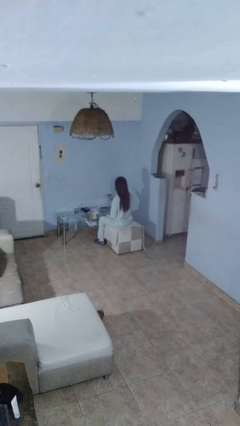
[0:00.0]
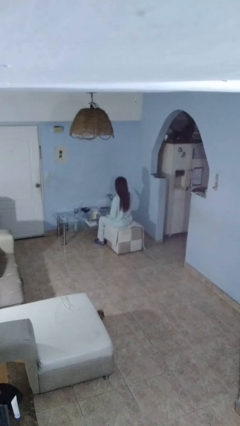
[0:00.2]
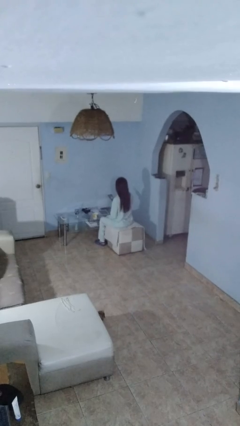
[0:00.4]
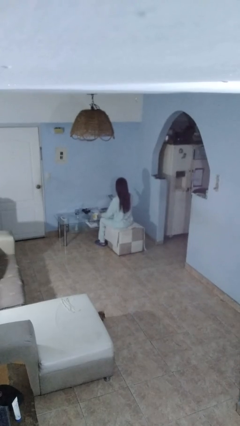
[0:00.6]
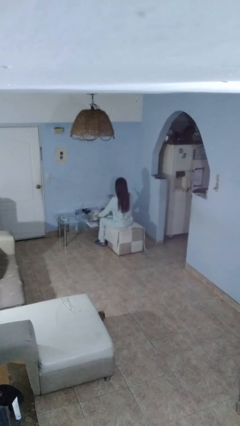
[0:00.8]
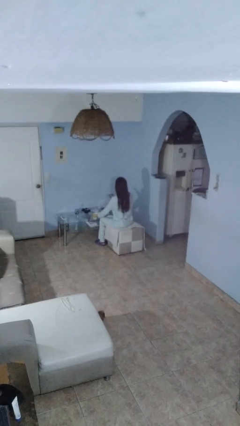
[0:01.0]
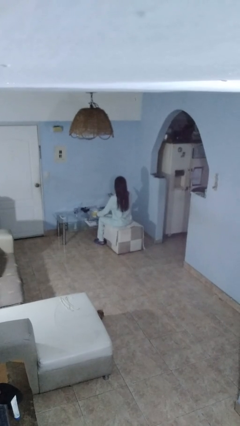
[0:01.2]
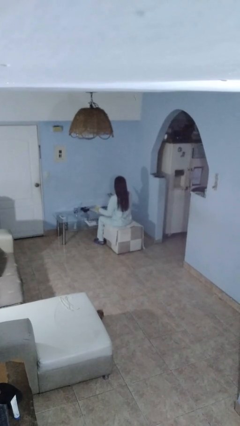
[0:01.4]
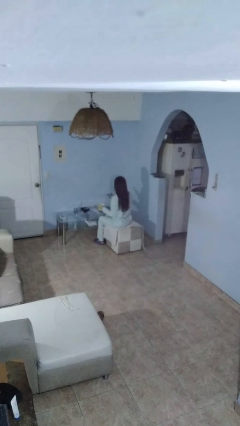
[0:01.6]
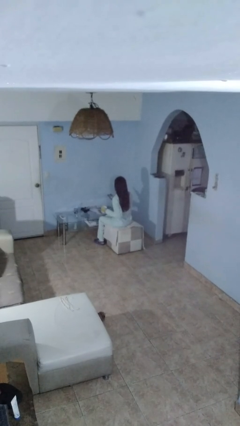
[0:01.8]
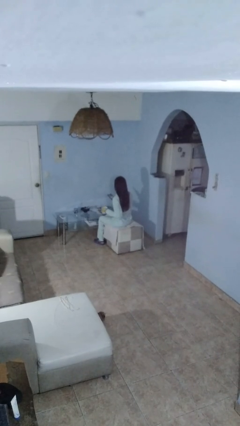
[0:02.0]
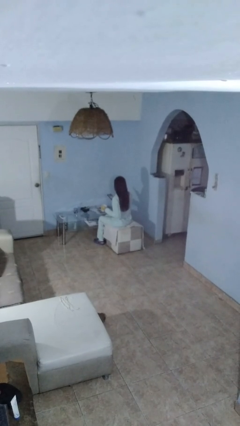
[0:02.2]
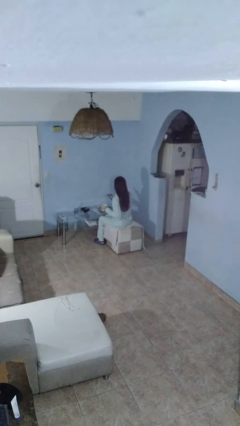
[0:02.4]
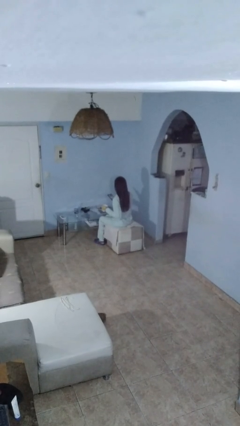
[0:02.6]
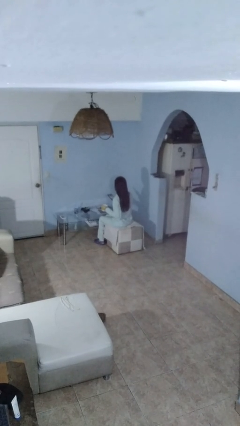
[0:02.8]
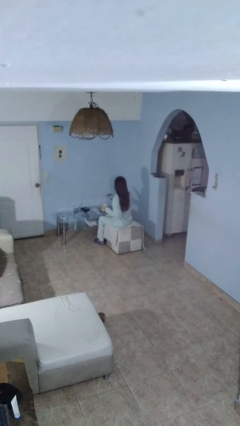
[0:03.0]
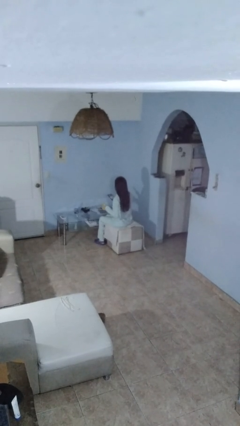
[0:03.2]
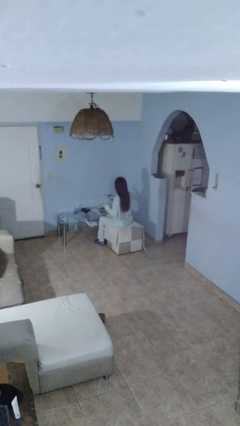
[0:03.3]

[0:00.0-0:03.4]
person picks up object from table

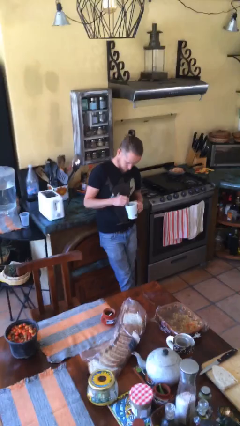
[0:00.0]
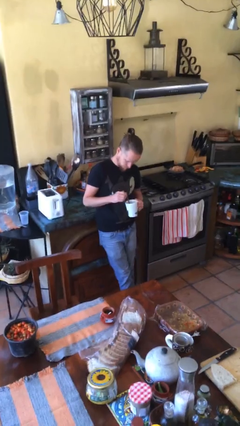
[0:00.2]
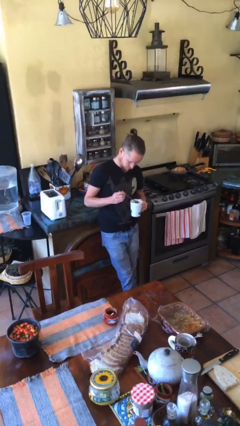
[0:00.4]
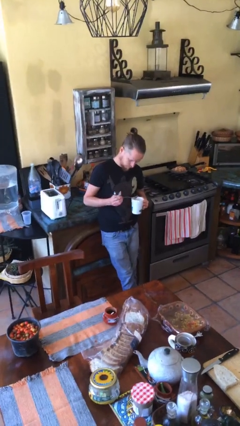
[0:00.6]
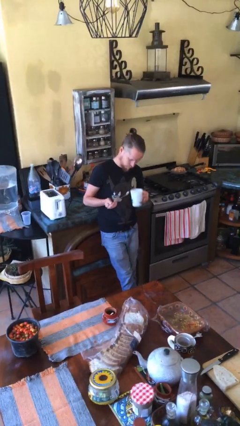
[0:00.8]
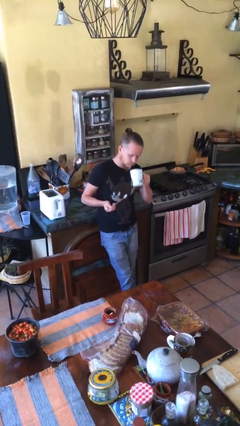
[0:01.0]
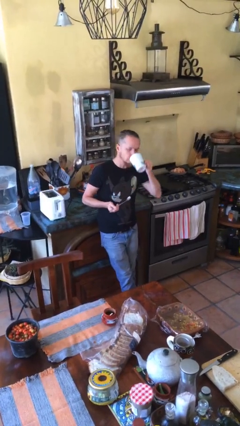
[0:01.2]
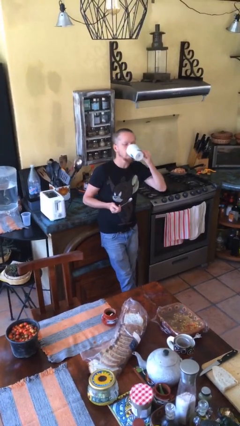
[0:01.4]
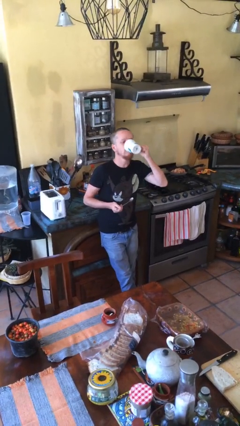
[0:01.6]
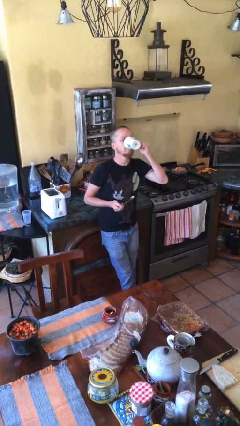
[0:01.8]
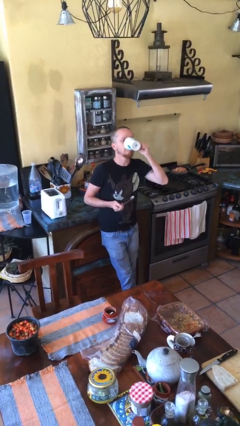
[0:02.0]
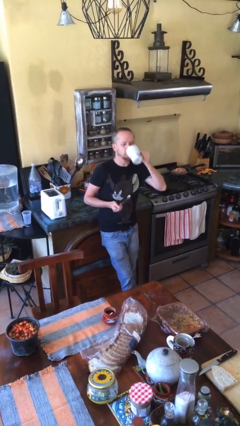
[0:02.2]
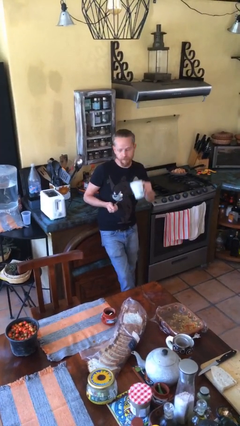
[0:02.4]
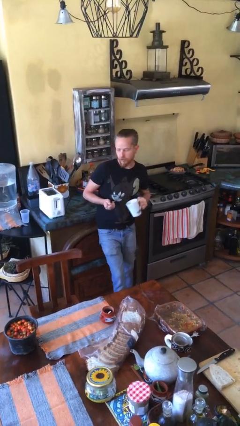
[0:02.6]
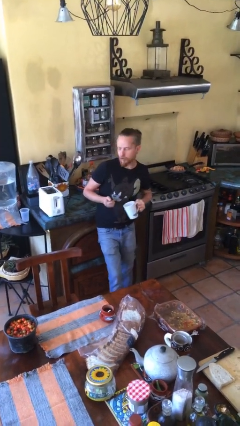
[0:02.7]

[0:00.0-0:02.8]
person drinks from mug

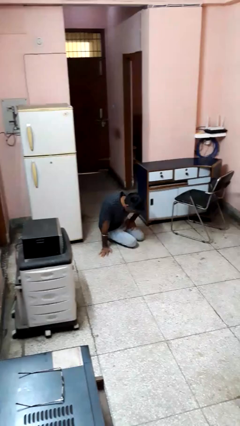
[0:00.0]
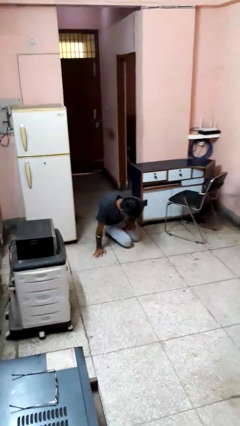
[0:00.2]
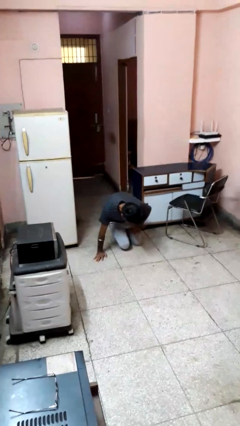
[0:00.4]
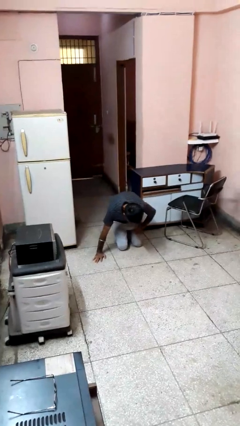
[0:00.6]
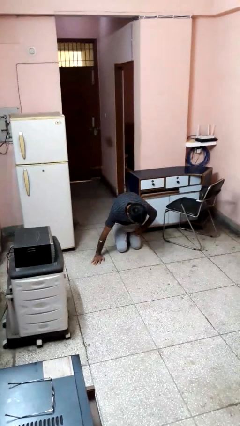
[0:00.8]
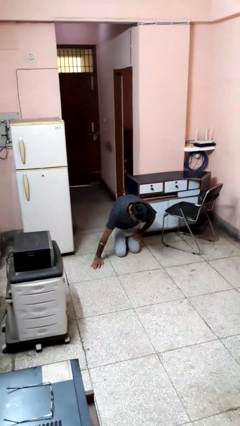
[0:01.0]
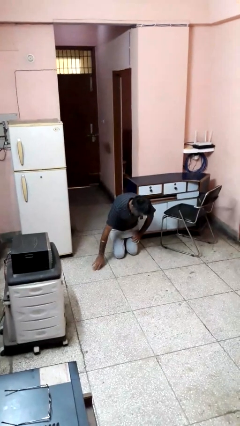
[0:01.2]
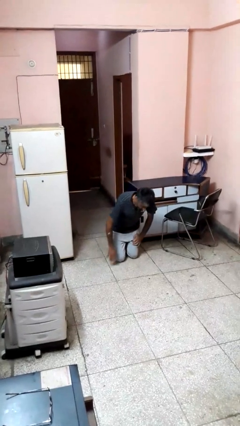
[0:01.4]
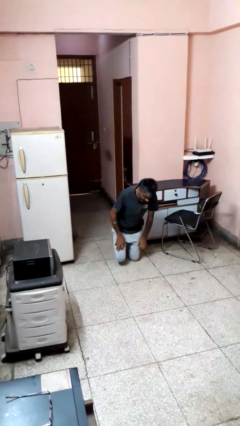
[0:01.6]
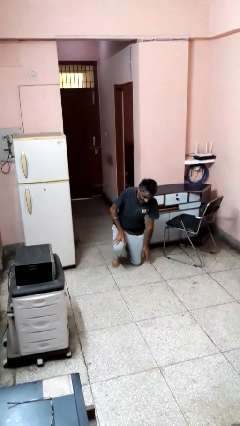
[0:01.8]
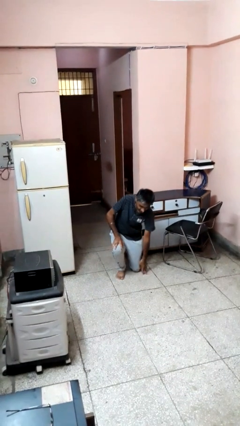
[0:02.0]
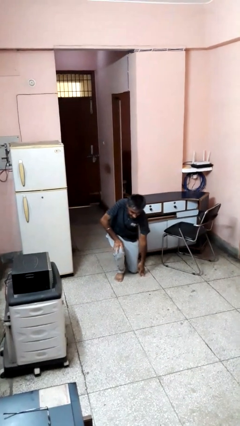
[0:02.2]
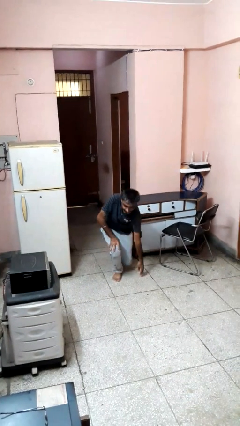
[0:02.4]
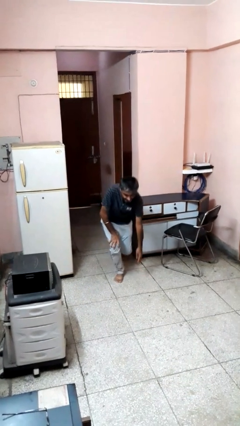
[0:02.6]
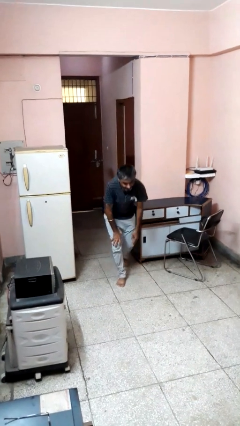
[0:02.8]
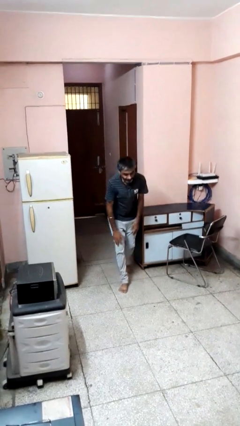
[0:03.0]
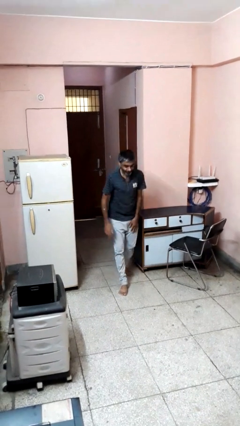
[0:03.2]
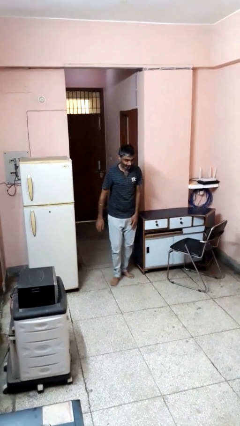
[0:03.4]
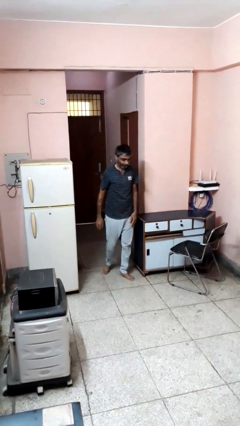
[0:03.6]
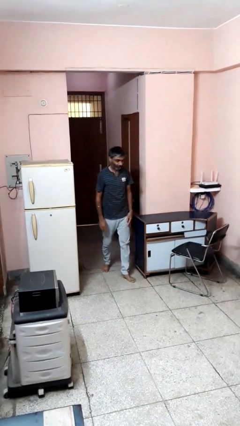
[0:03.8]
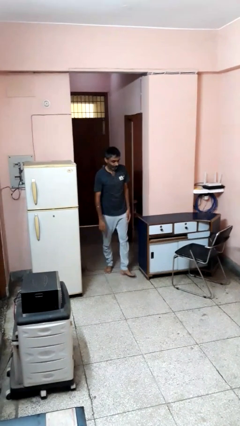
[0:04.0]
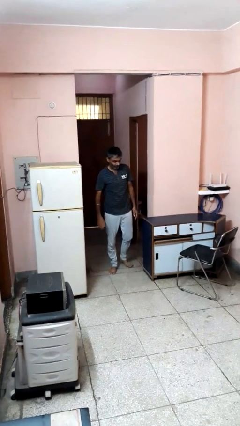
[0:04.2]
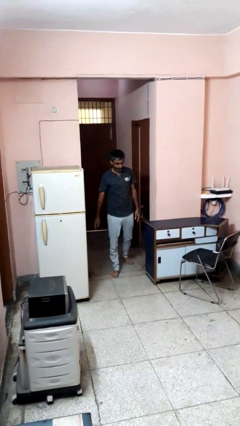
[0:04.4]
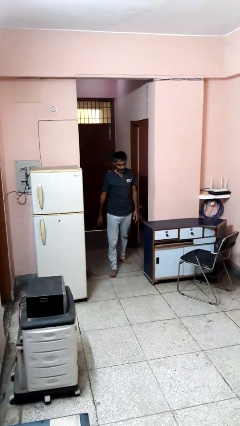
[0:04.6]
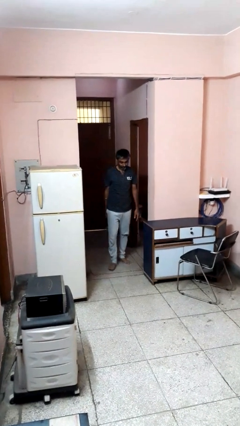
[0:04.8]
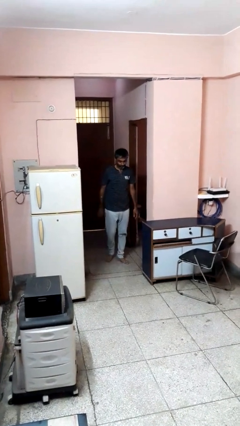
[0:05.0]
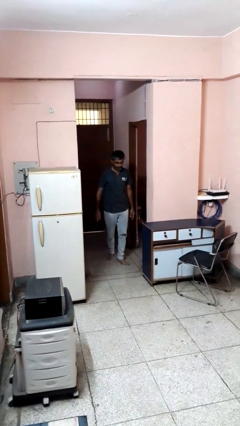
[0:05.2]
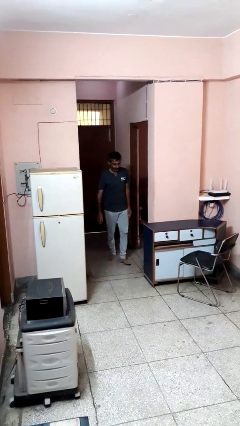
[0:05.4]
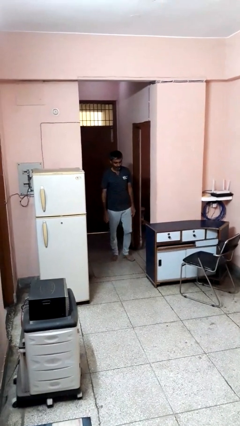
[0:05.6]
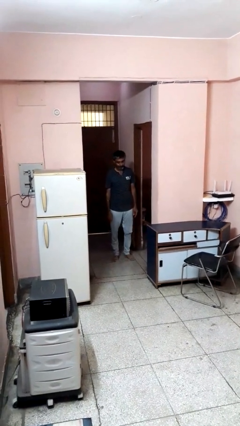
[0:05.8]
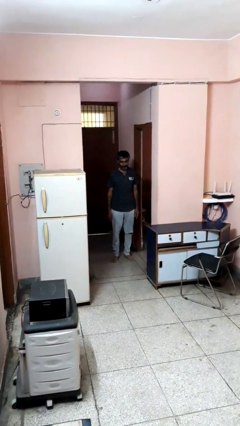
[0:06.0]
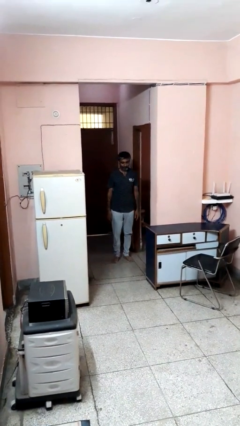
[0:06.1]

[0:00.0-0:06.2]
person stands up from floor

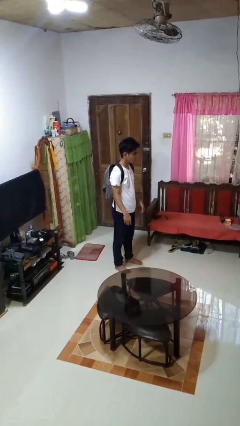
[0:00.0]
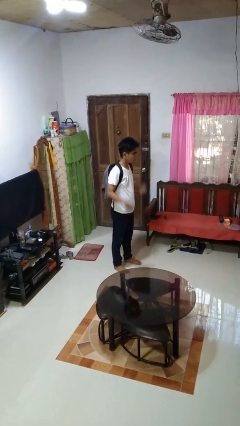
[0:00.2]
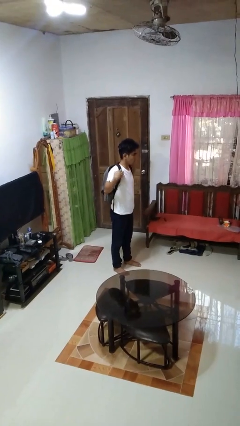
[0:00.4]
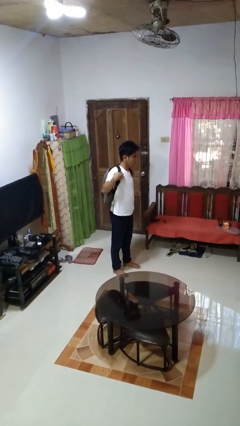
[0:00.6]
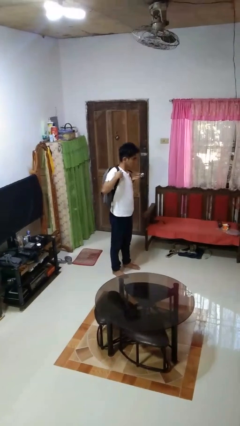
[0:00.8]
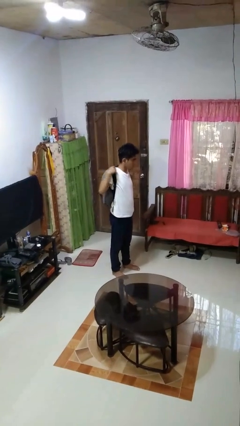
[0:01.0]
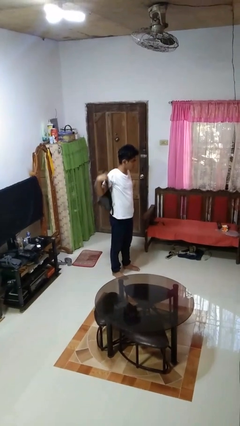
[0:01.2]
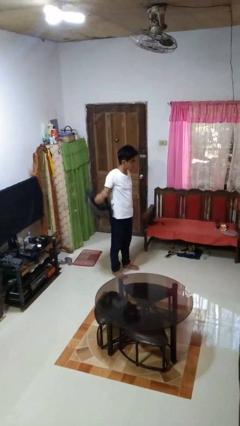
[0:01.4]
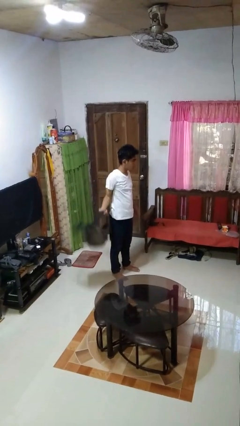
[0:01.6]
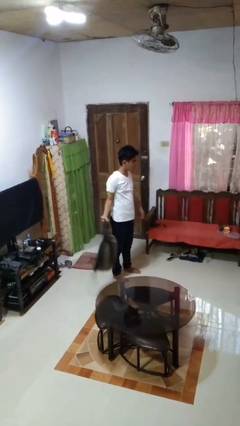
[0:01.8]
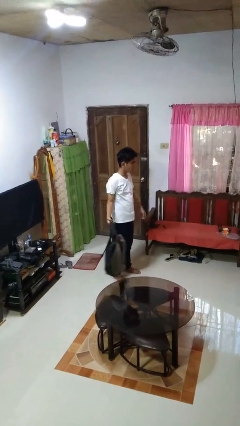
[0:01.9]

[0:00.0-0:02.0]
person takes off backpack

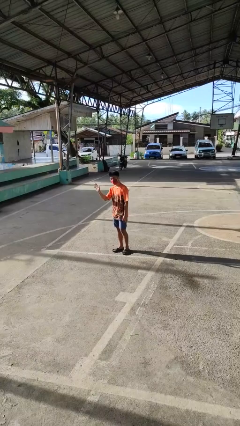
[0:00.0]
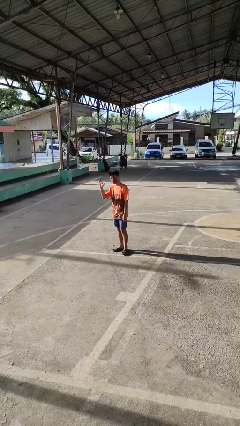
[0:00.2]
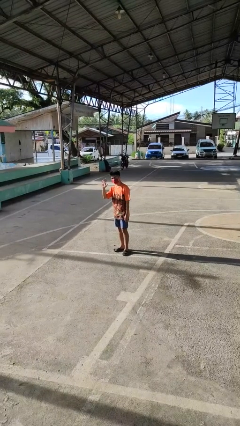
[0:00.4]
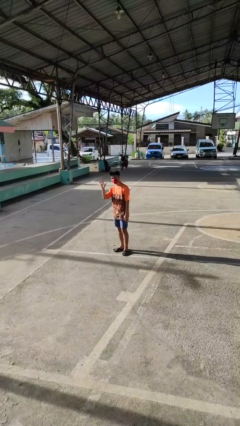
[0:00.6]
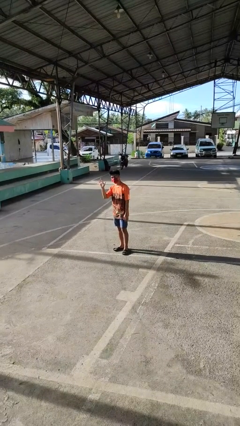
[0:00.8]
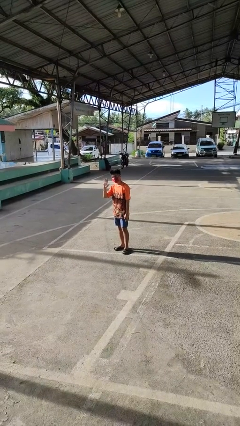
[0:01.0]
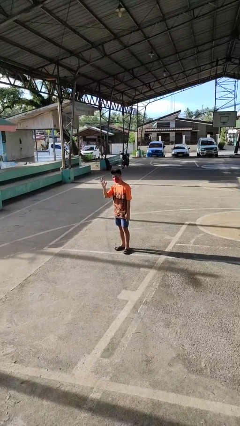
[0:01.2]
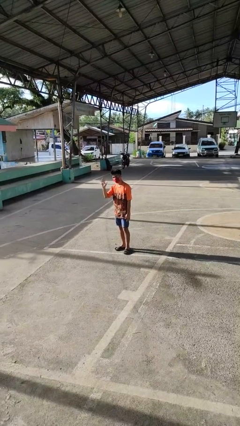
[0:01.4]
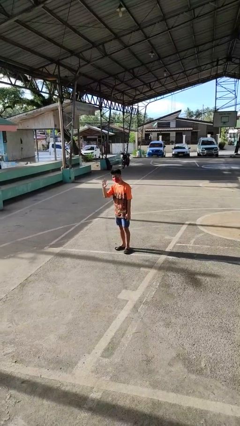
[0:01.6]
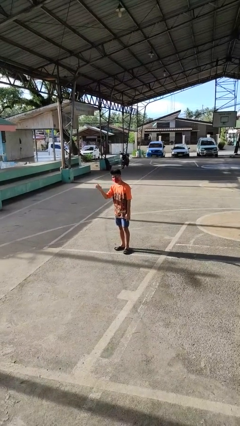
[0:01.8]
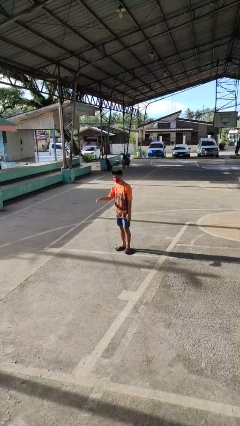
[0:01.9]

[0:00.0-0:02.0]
person waves at person

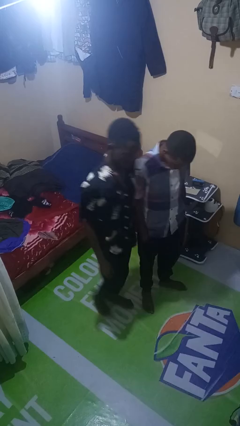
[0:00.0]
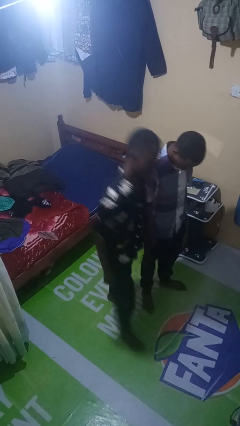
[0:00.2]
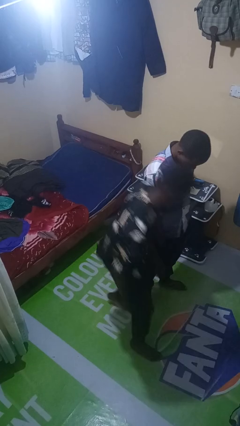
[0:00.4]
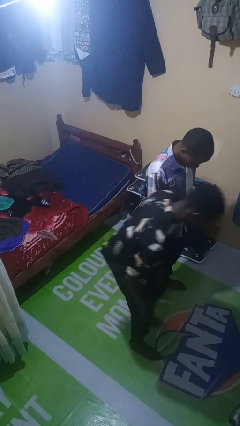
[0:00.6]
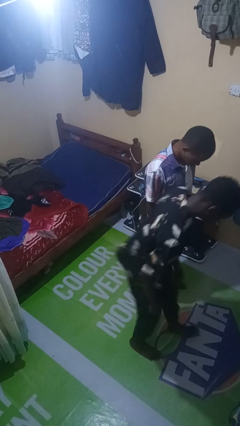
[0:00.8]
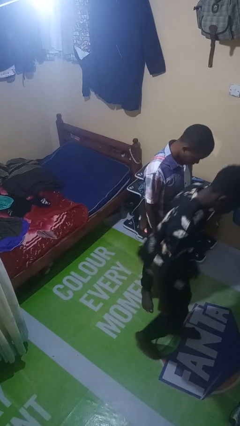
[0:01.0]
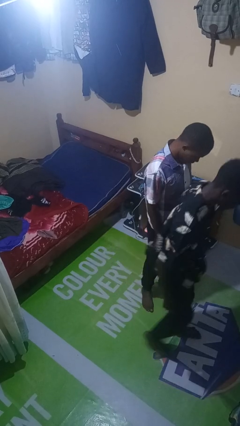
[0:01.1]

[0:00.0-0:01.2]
person bumps into person
